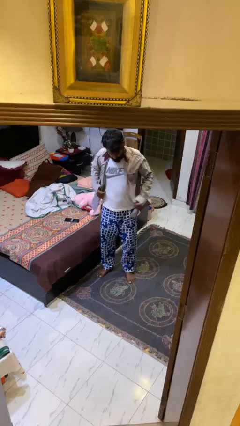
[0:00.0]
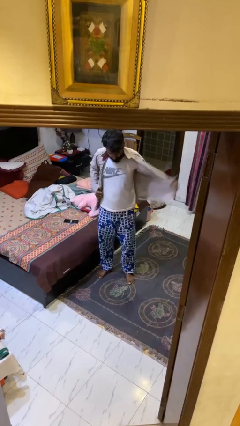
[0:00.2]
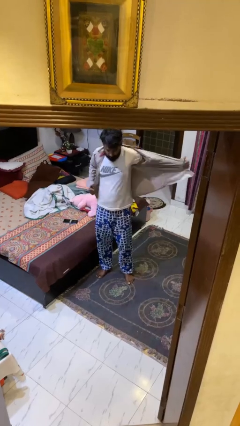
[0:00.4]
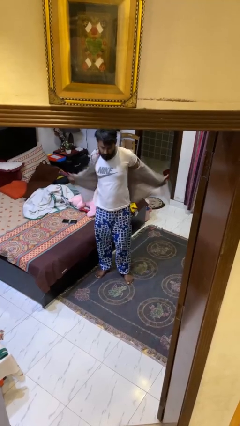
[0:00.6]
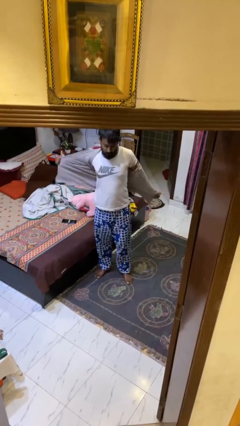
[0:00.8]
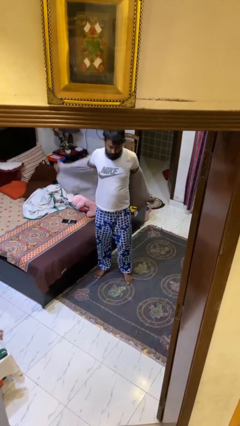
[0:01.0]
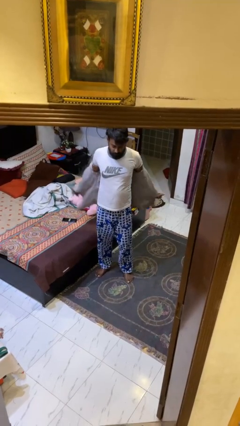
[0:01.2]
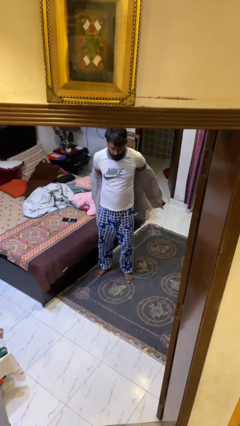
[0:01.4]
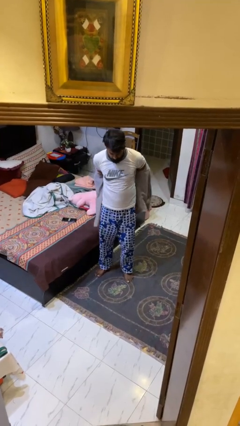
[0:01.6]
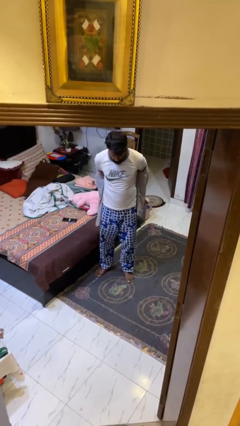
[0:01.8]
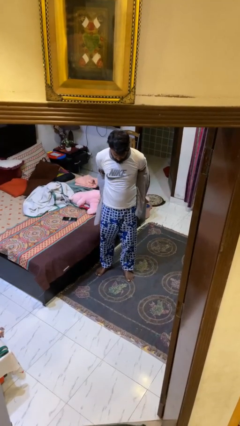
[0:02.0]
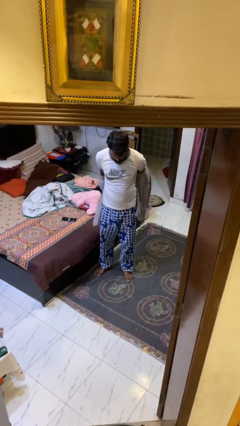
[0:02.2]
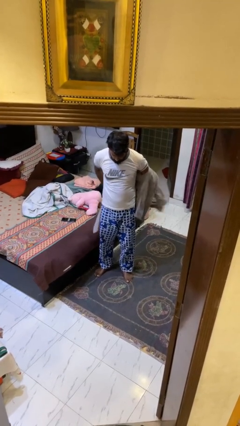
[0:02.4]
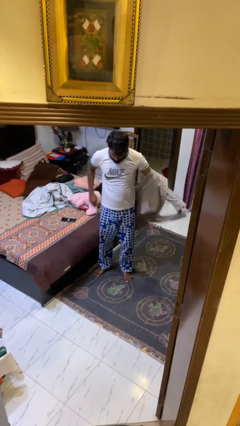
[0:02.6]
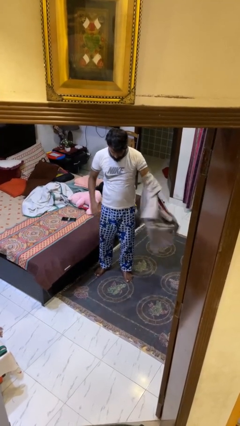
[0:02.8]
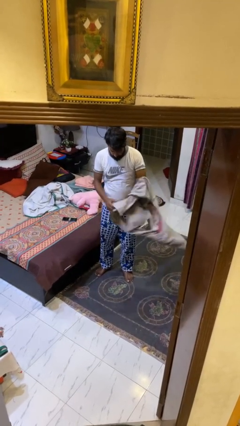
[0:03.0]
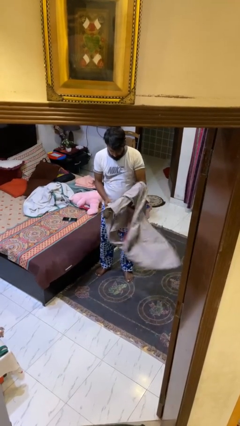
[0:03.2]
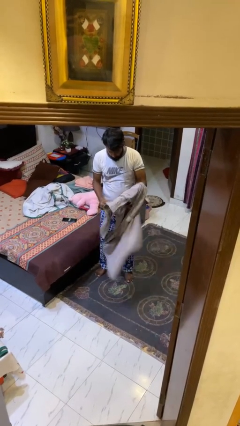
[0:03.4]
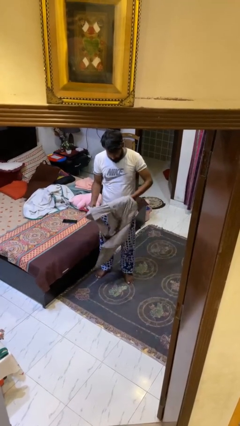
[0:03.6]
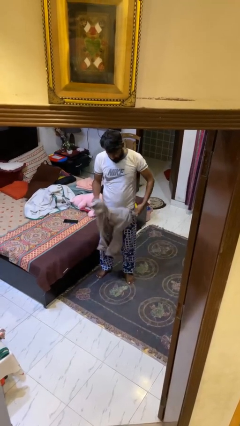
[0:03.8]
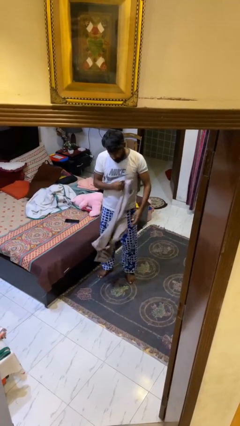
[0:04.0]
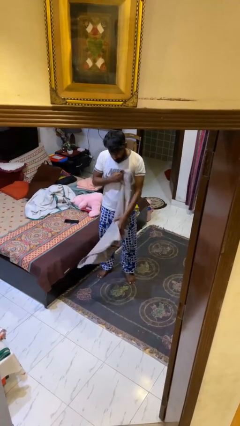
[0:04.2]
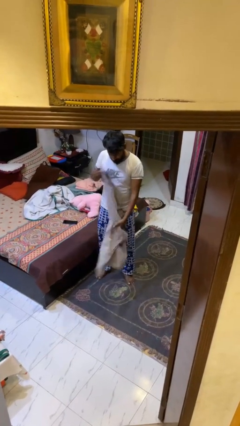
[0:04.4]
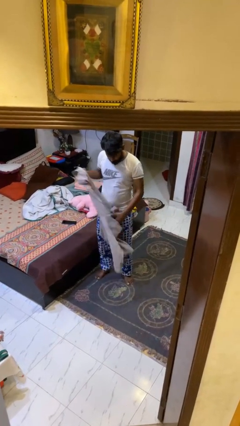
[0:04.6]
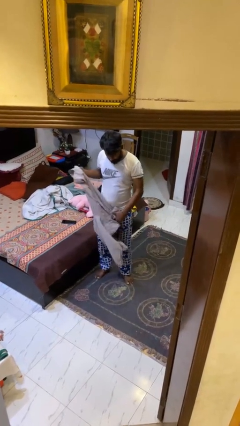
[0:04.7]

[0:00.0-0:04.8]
person takes off shirt

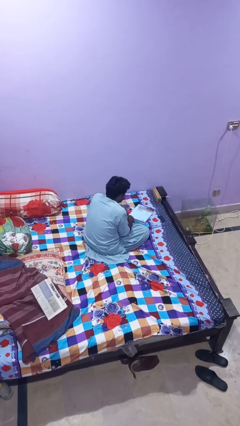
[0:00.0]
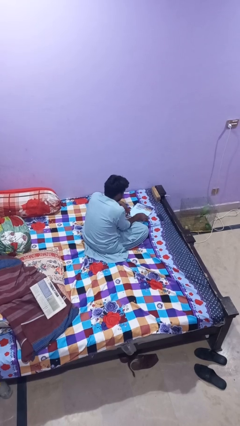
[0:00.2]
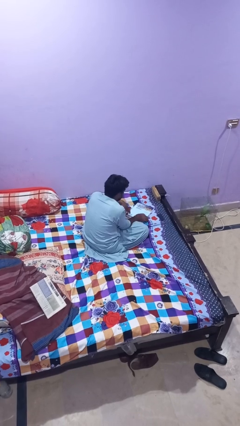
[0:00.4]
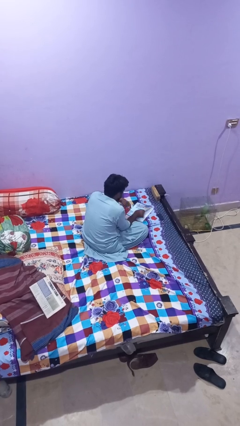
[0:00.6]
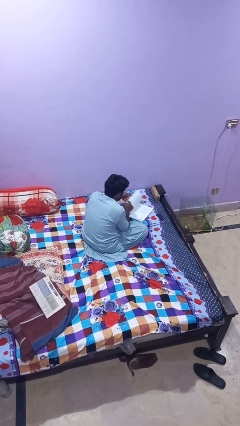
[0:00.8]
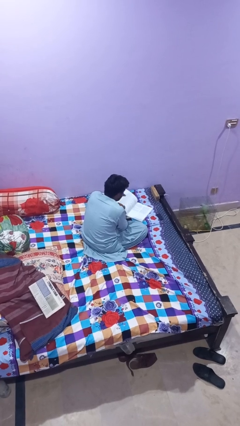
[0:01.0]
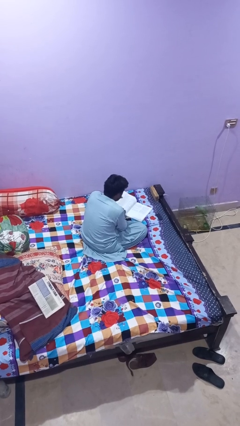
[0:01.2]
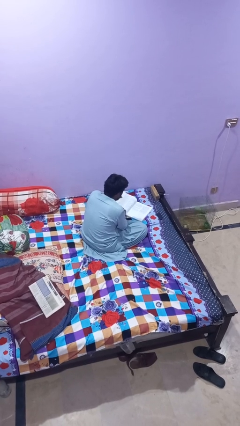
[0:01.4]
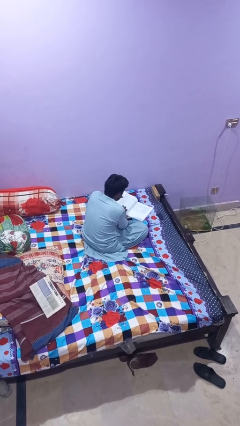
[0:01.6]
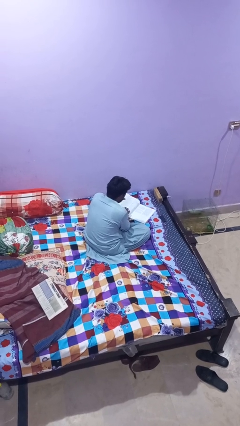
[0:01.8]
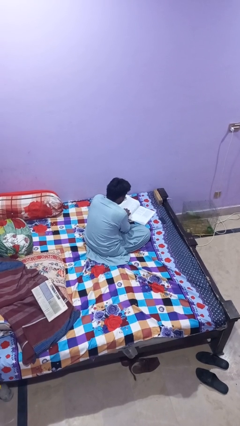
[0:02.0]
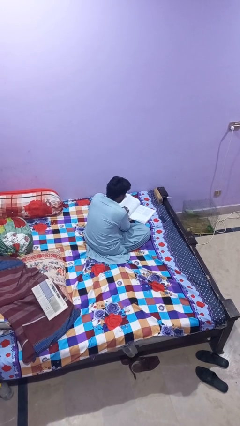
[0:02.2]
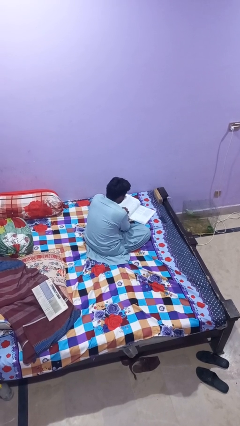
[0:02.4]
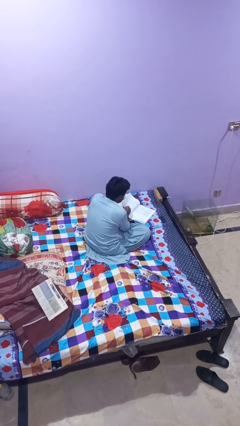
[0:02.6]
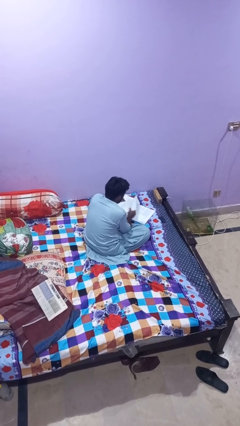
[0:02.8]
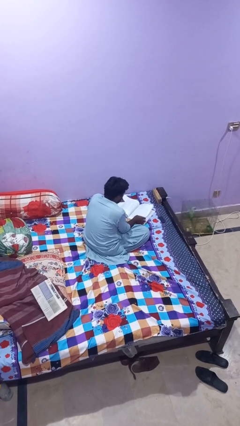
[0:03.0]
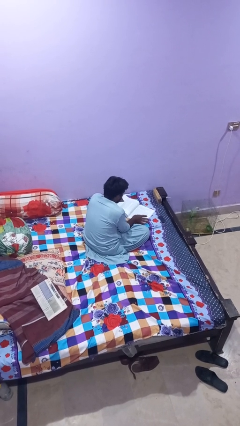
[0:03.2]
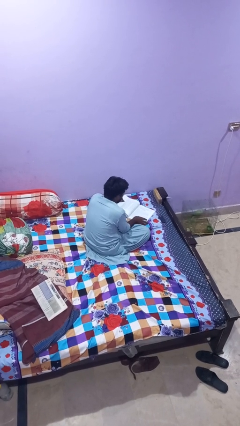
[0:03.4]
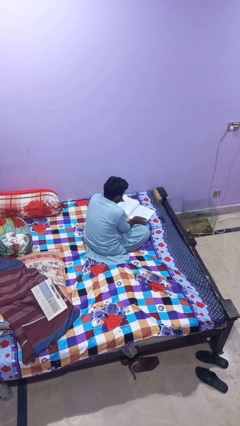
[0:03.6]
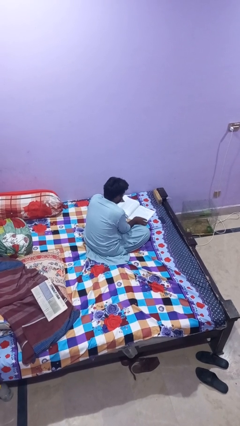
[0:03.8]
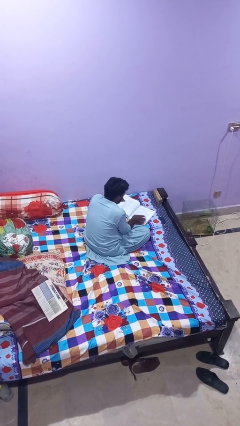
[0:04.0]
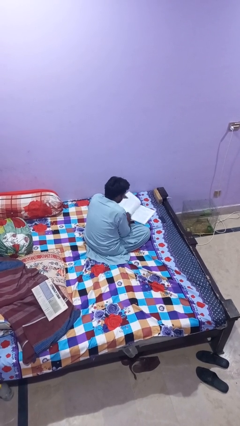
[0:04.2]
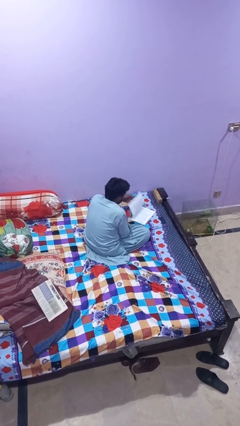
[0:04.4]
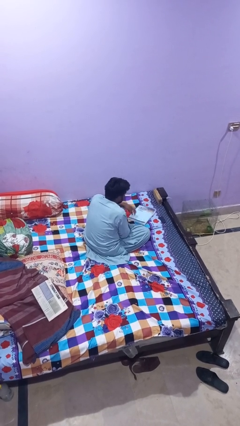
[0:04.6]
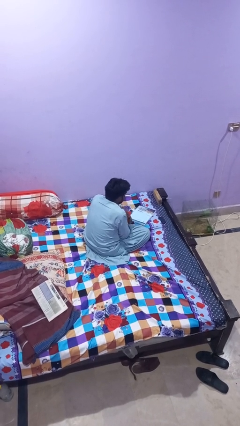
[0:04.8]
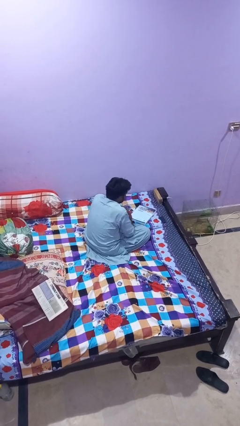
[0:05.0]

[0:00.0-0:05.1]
person reads book

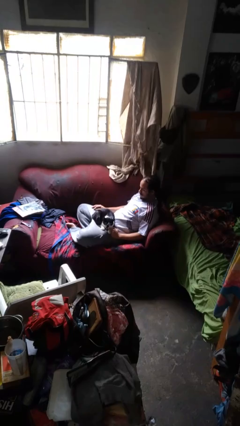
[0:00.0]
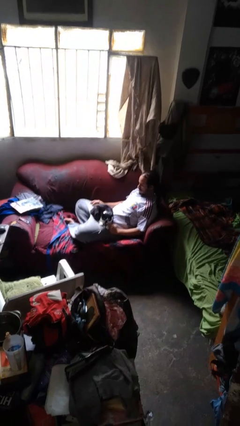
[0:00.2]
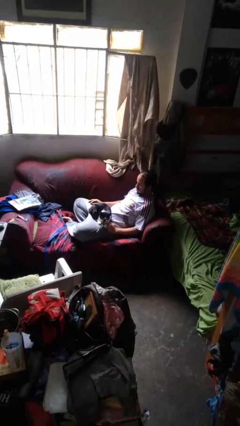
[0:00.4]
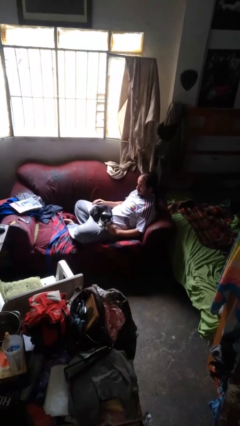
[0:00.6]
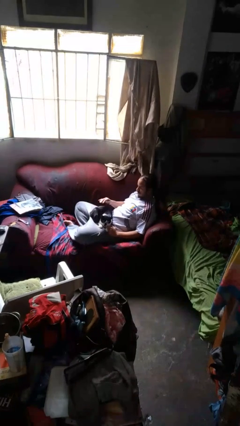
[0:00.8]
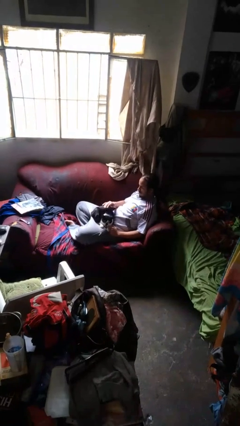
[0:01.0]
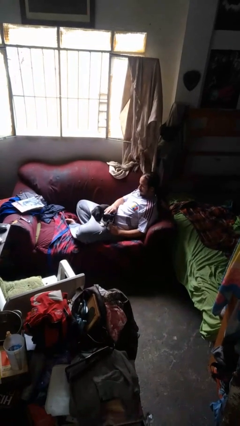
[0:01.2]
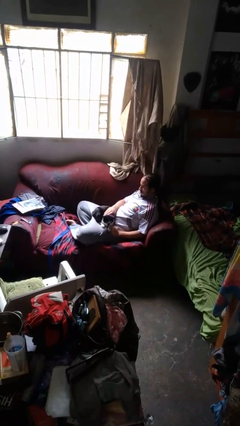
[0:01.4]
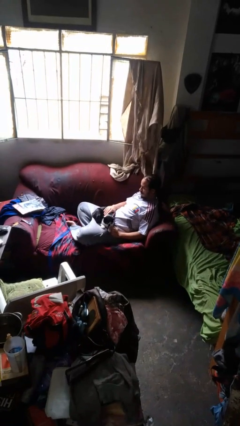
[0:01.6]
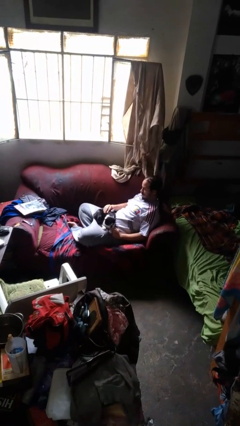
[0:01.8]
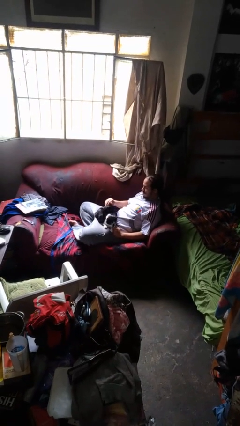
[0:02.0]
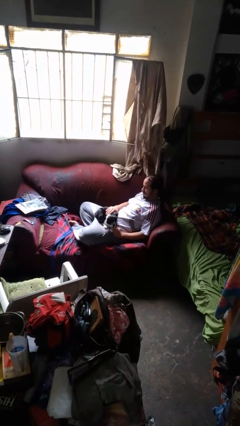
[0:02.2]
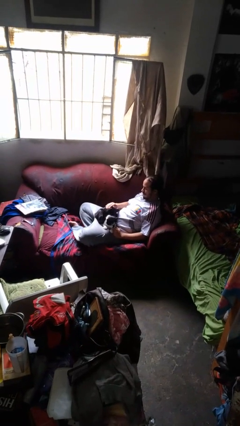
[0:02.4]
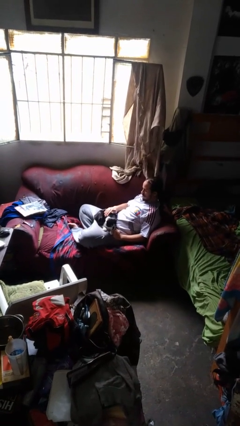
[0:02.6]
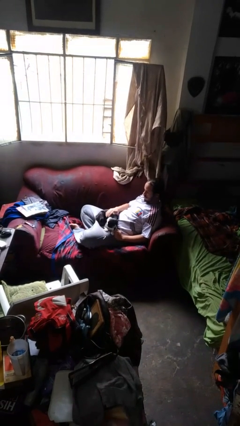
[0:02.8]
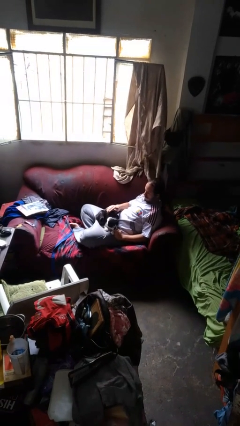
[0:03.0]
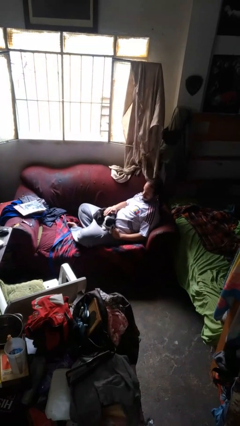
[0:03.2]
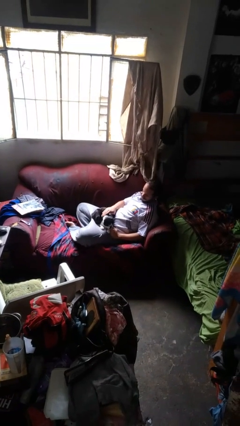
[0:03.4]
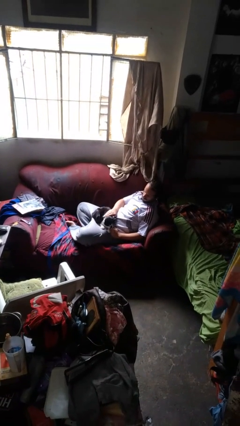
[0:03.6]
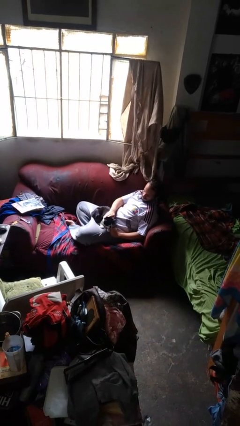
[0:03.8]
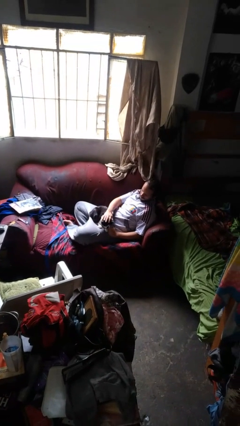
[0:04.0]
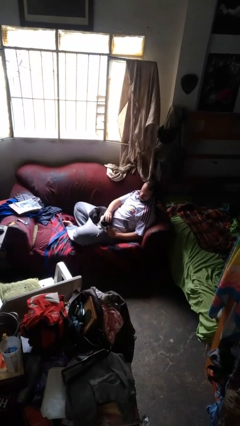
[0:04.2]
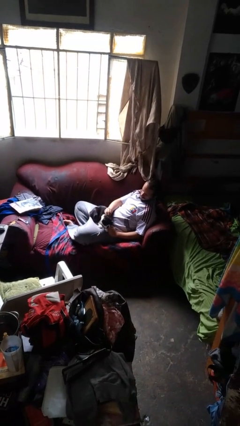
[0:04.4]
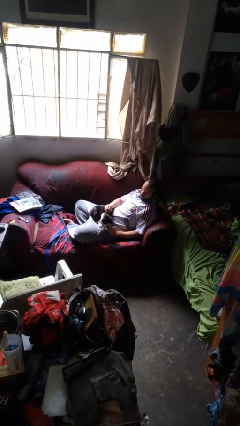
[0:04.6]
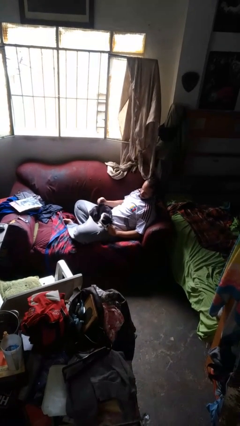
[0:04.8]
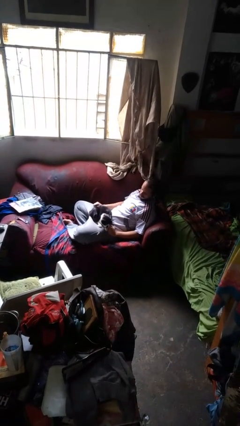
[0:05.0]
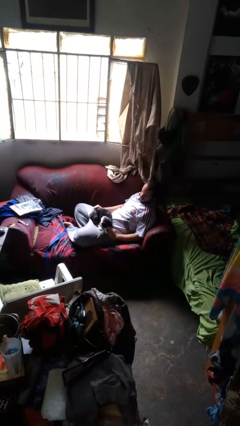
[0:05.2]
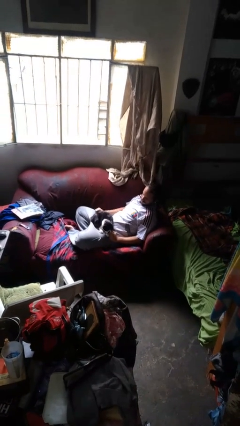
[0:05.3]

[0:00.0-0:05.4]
person pets cat

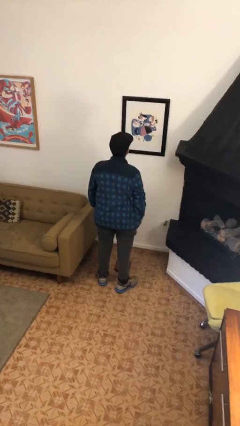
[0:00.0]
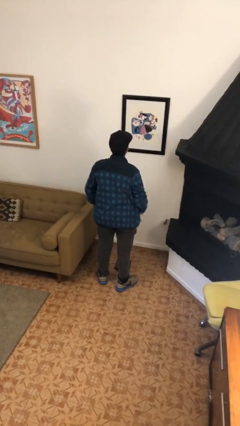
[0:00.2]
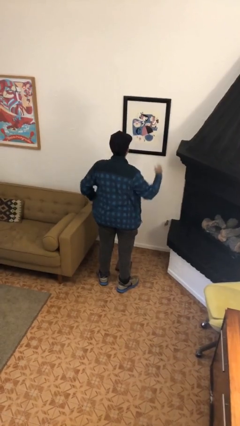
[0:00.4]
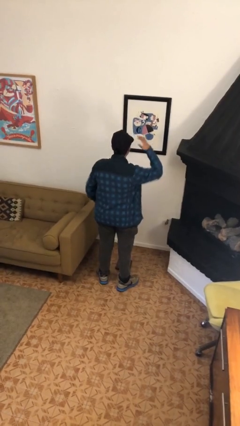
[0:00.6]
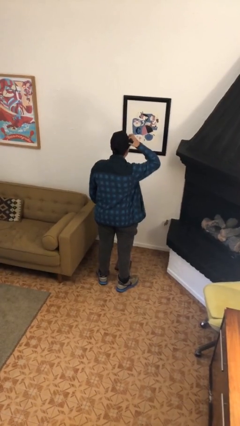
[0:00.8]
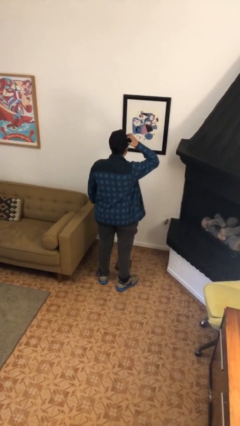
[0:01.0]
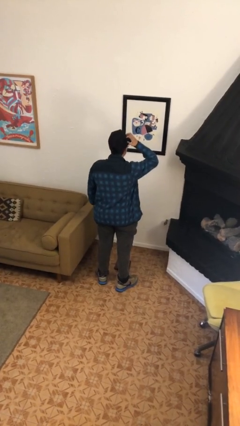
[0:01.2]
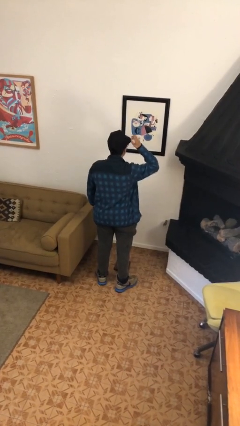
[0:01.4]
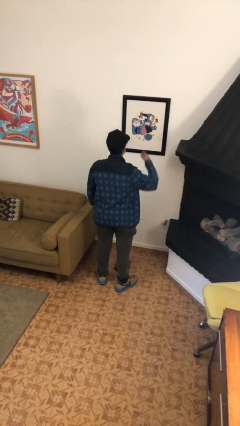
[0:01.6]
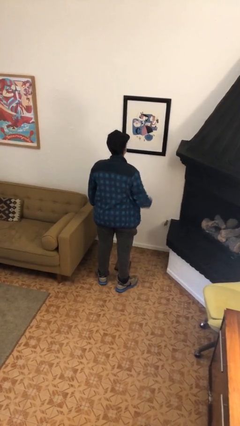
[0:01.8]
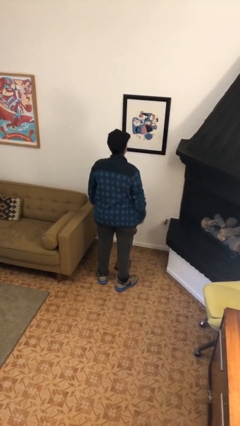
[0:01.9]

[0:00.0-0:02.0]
person scratches face

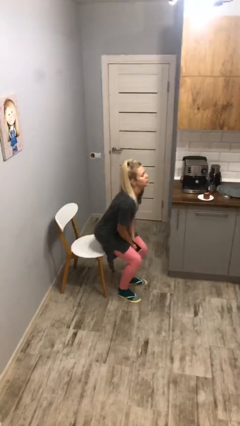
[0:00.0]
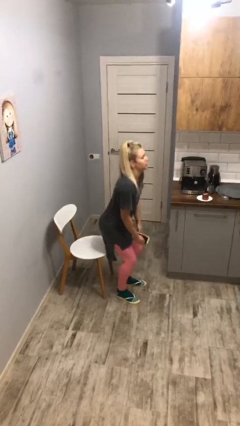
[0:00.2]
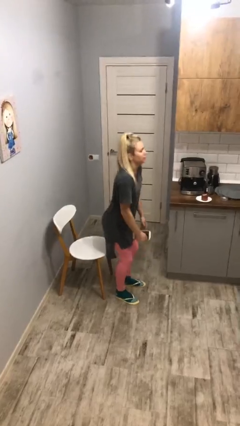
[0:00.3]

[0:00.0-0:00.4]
person stands up

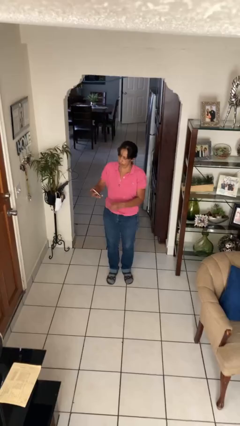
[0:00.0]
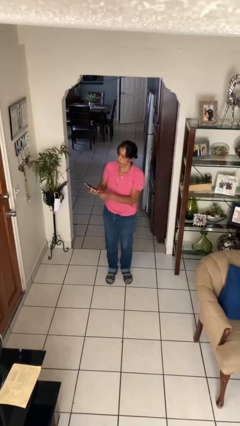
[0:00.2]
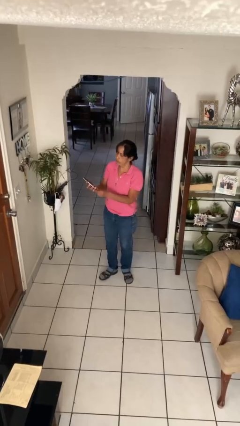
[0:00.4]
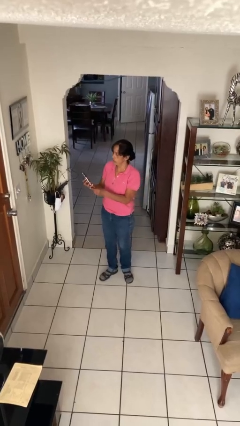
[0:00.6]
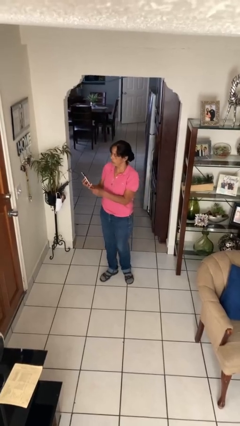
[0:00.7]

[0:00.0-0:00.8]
person takes phone from pocket
